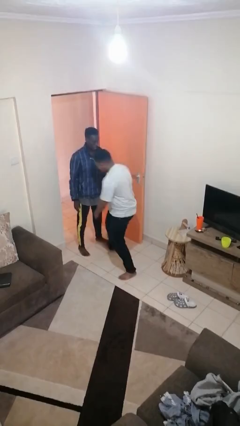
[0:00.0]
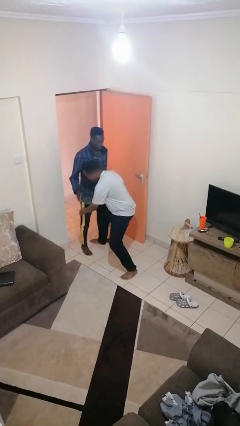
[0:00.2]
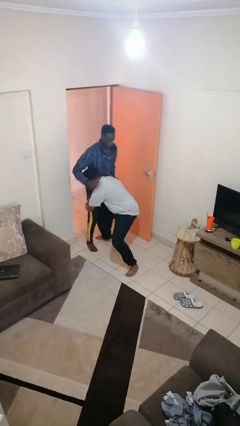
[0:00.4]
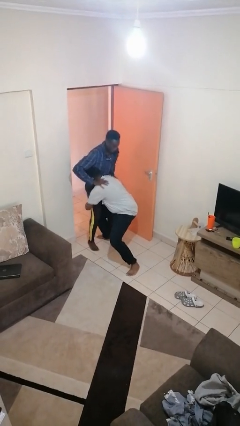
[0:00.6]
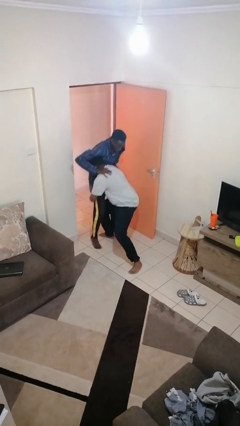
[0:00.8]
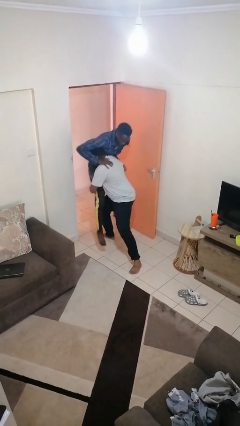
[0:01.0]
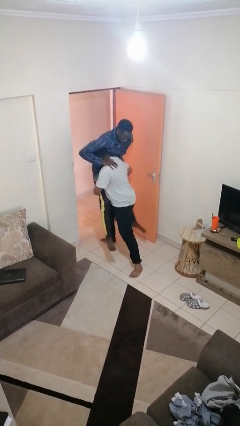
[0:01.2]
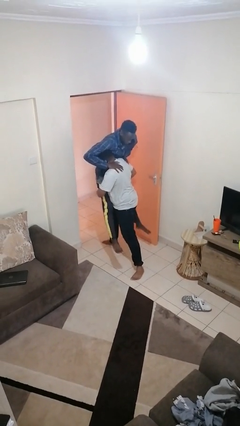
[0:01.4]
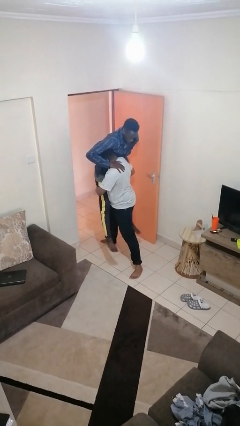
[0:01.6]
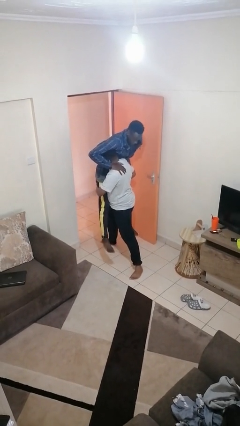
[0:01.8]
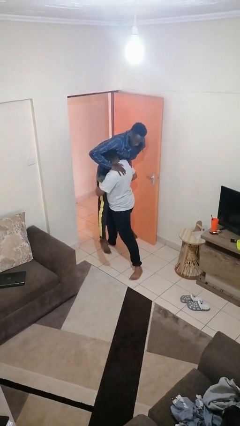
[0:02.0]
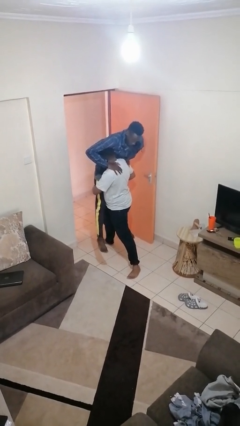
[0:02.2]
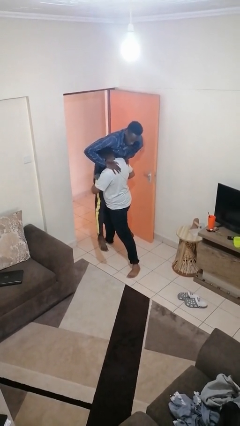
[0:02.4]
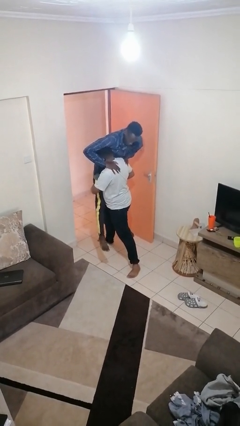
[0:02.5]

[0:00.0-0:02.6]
person picks up person

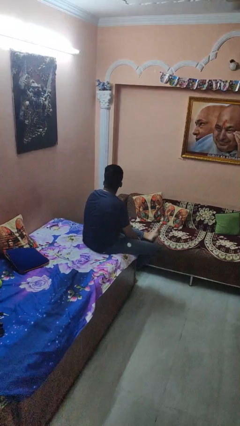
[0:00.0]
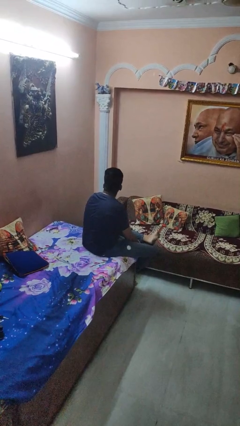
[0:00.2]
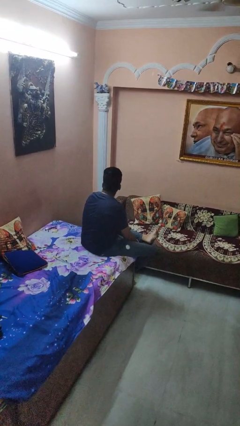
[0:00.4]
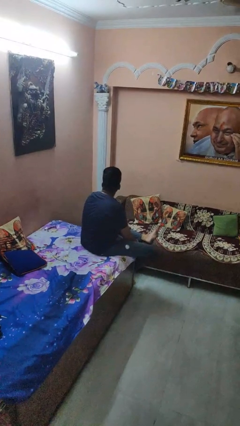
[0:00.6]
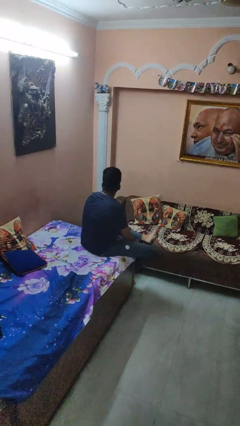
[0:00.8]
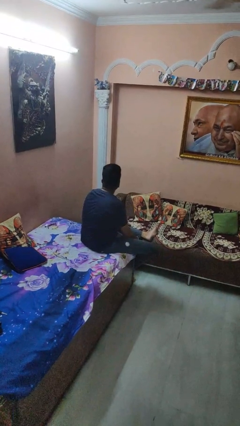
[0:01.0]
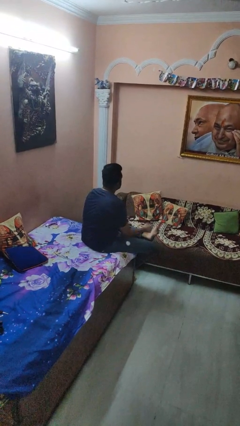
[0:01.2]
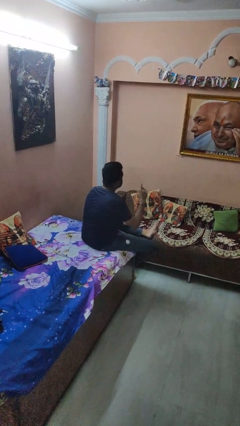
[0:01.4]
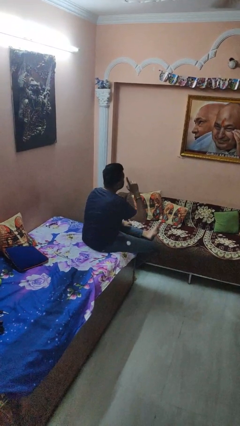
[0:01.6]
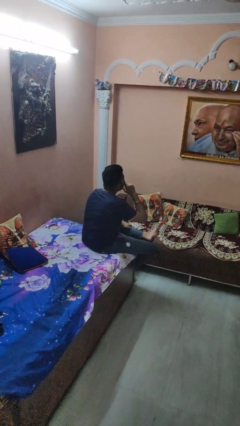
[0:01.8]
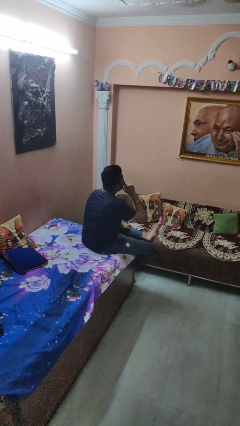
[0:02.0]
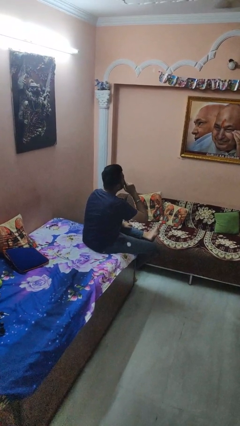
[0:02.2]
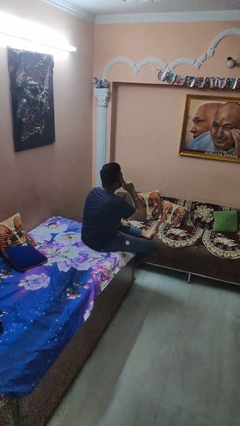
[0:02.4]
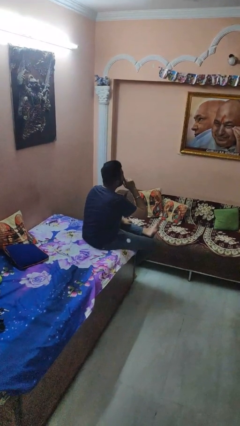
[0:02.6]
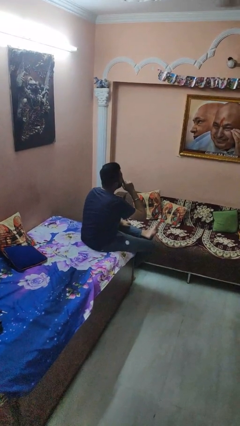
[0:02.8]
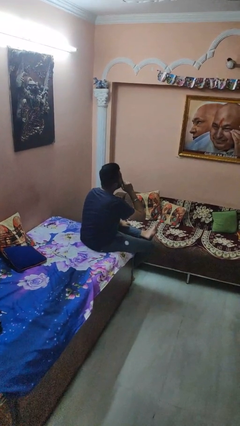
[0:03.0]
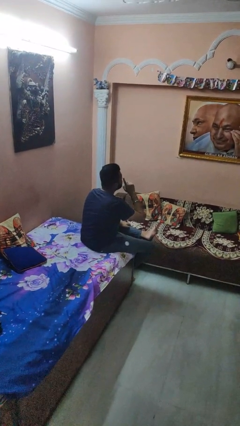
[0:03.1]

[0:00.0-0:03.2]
person gestures be quiet

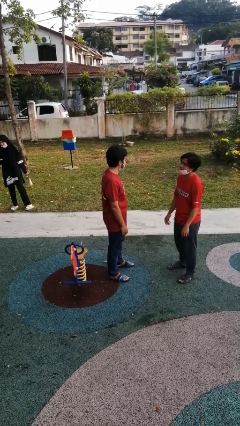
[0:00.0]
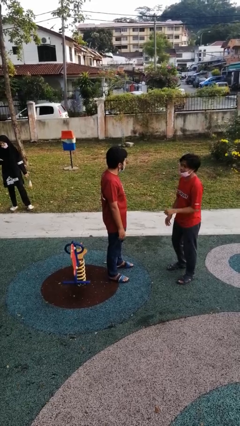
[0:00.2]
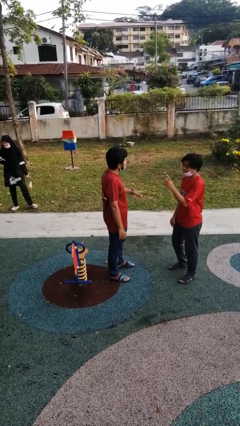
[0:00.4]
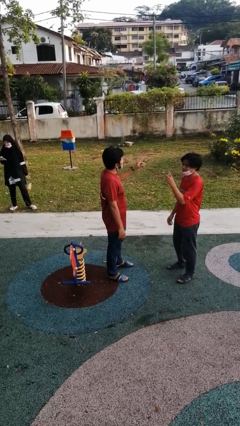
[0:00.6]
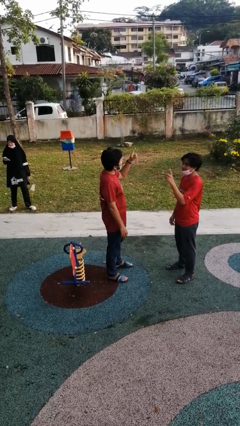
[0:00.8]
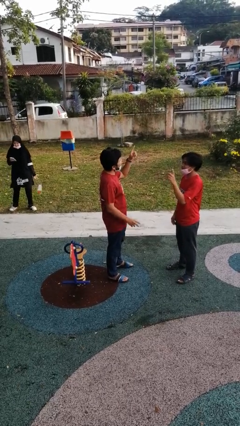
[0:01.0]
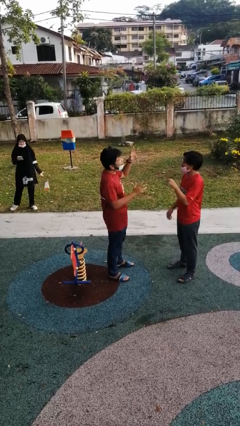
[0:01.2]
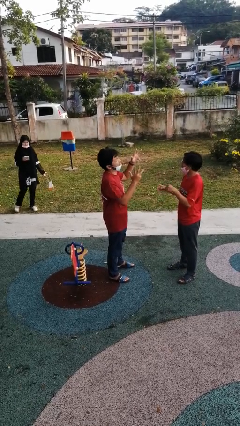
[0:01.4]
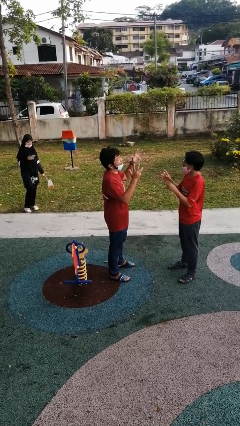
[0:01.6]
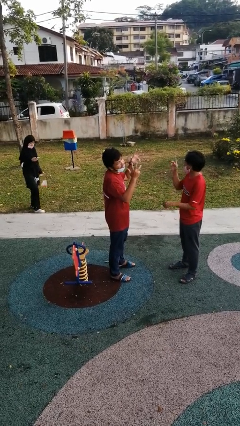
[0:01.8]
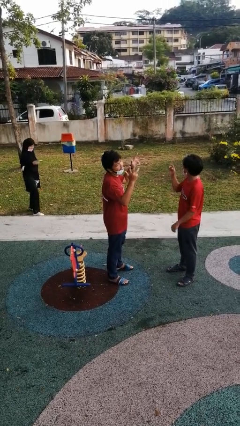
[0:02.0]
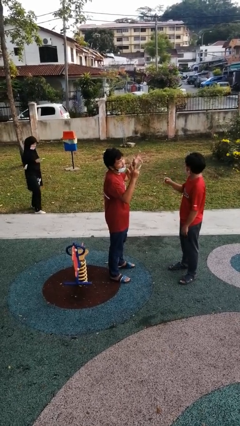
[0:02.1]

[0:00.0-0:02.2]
person talks to person

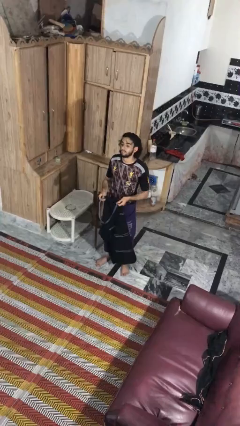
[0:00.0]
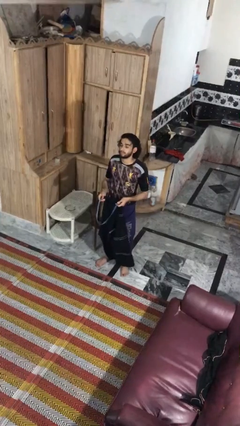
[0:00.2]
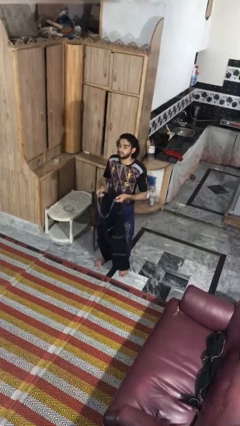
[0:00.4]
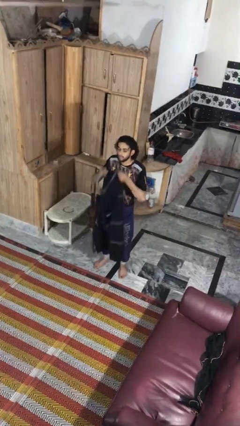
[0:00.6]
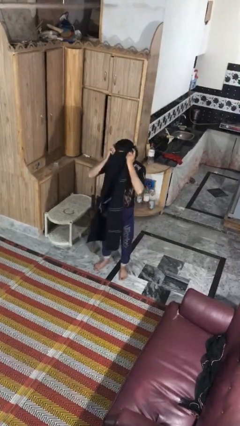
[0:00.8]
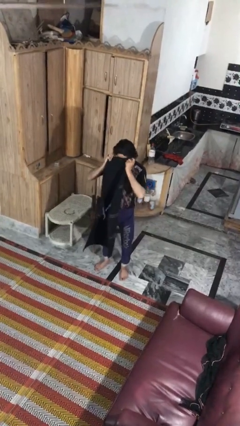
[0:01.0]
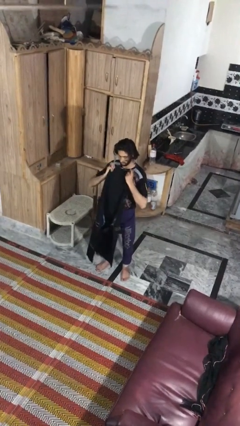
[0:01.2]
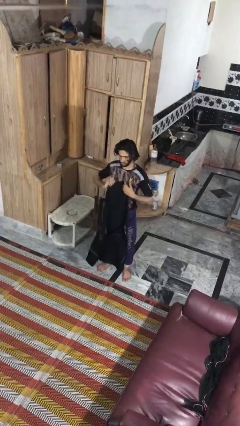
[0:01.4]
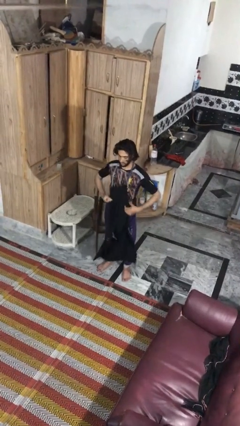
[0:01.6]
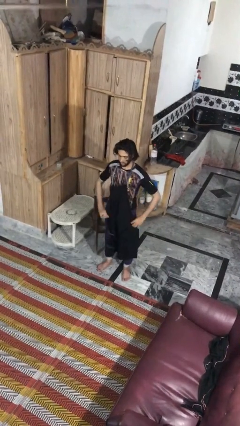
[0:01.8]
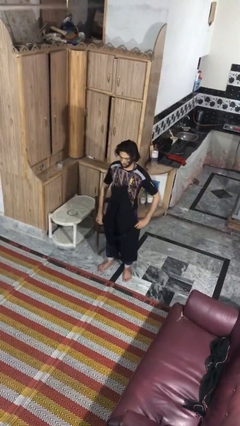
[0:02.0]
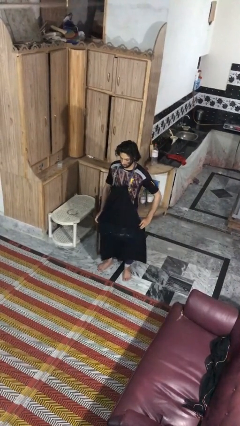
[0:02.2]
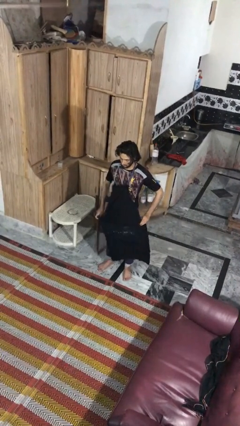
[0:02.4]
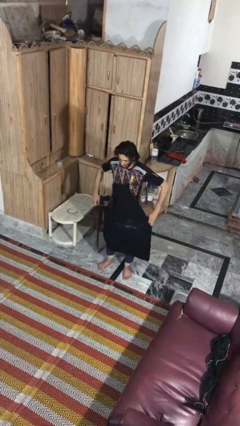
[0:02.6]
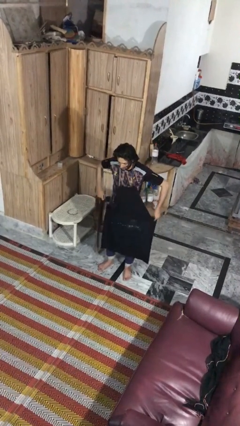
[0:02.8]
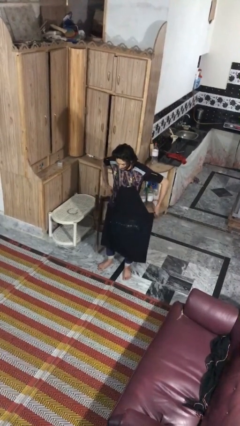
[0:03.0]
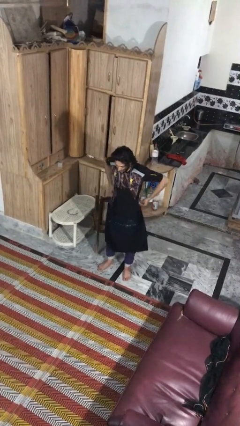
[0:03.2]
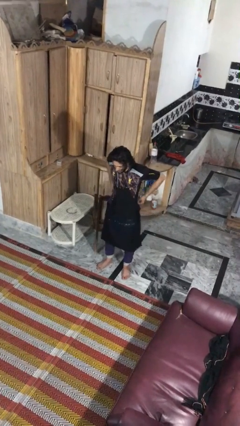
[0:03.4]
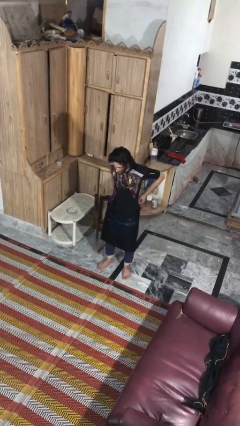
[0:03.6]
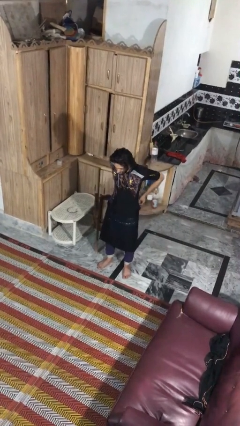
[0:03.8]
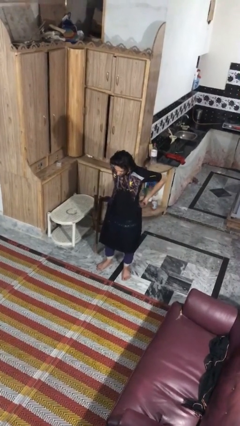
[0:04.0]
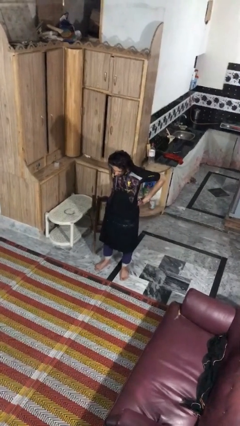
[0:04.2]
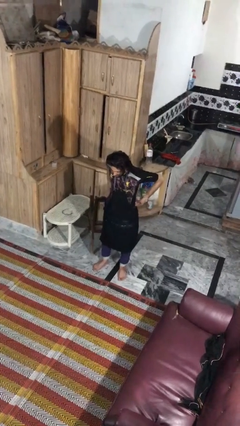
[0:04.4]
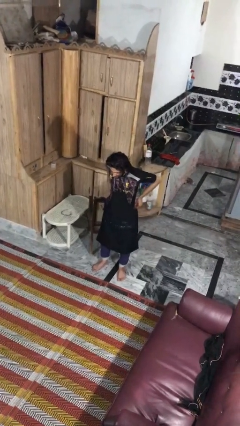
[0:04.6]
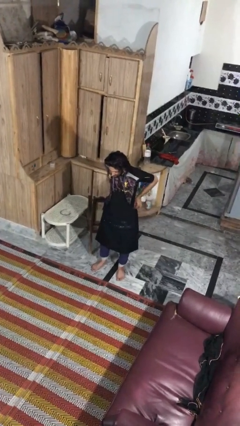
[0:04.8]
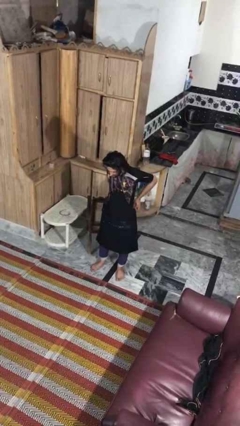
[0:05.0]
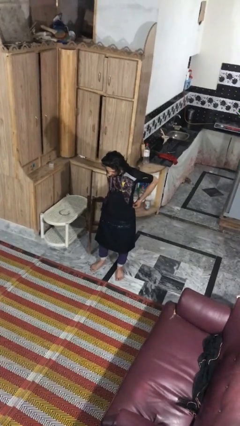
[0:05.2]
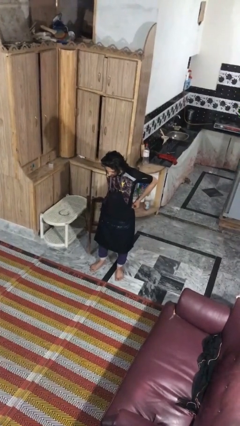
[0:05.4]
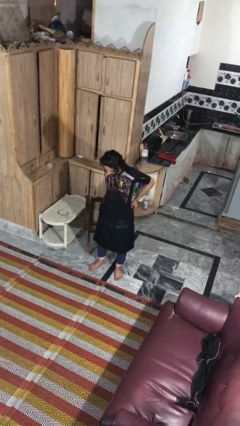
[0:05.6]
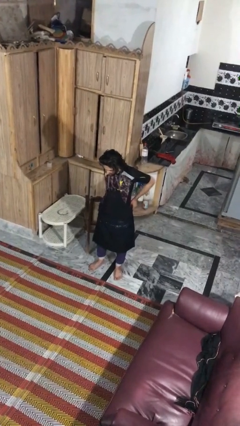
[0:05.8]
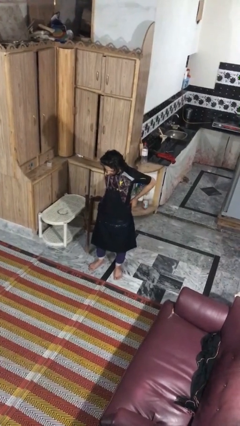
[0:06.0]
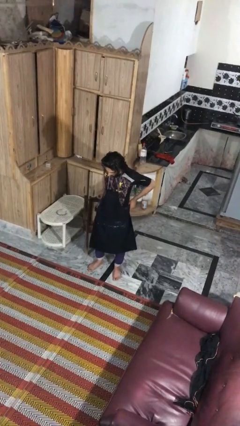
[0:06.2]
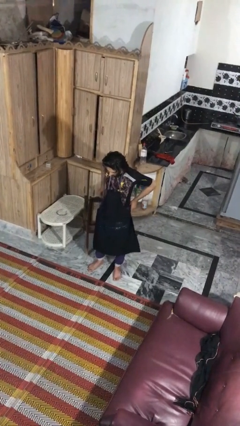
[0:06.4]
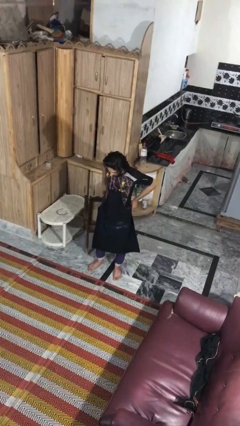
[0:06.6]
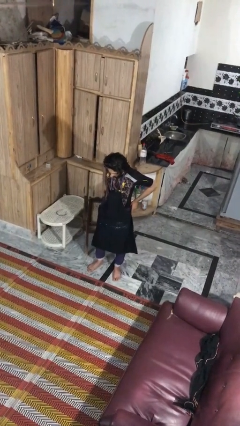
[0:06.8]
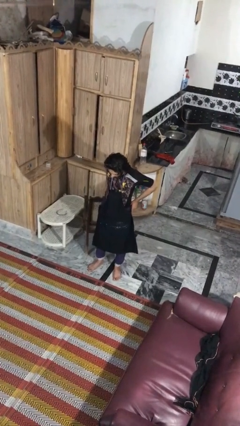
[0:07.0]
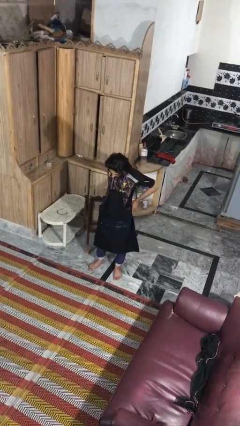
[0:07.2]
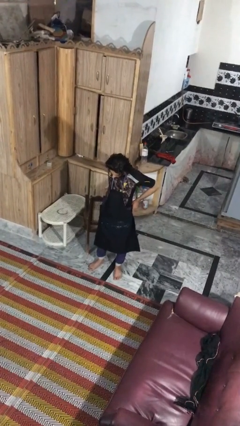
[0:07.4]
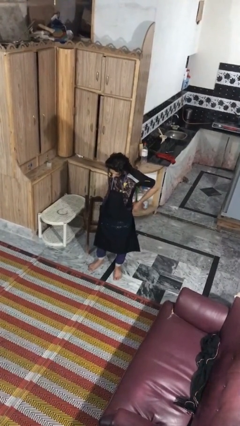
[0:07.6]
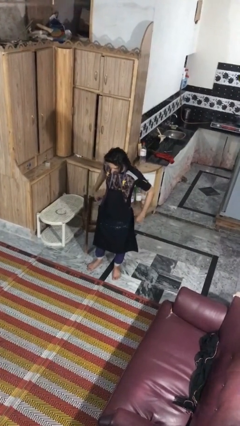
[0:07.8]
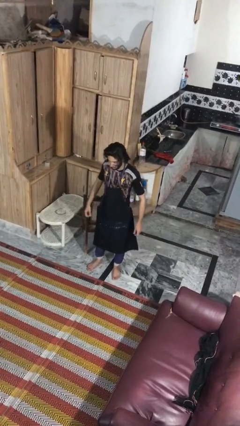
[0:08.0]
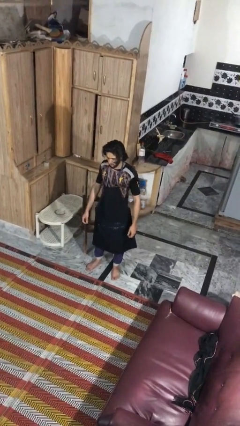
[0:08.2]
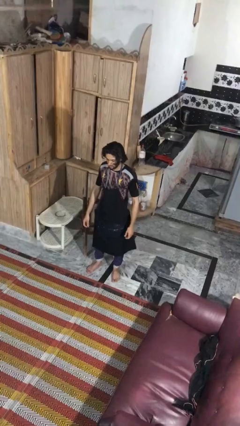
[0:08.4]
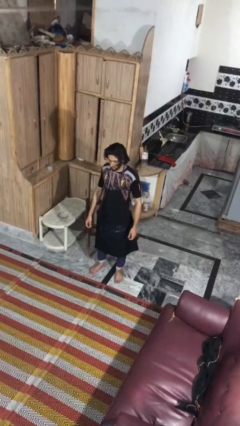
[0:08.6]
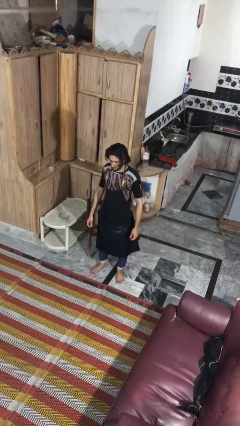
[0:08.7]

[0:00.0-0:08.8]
person puts on apron

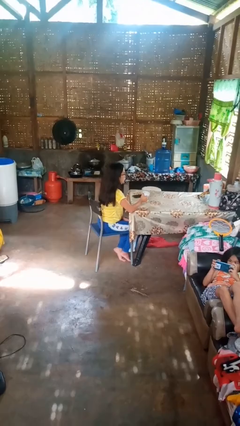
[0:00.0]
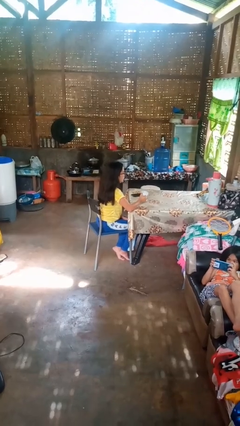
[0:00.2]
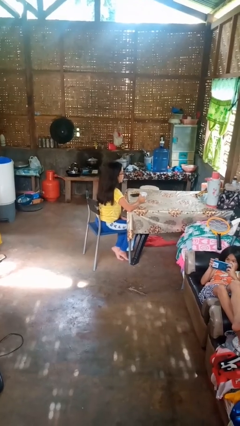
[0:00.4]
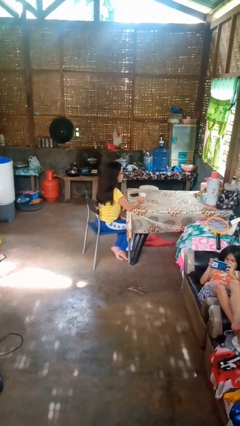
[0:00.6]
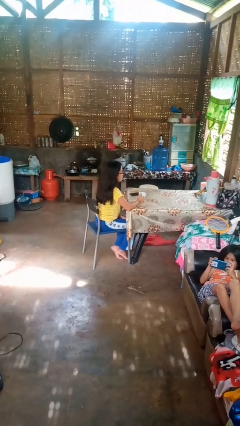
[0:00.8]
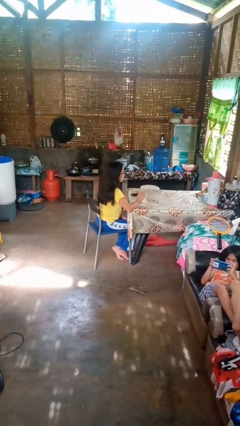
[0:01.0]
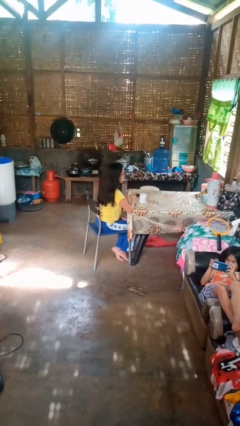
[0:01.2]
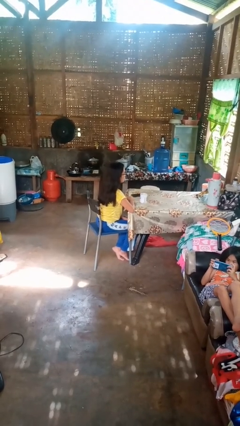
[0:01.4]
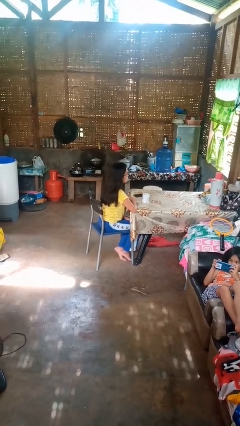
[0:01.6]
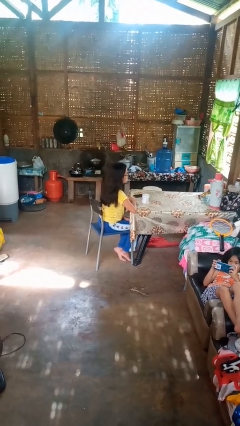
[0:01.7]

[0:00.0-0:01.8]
person puts down object on table
